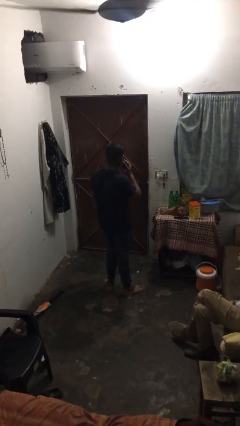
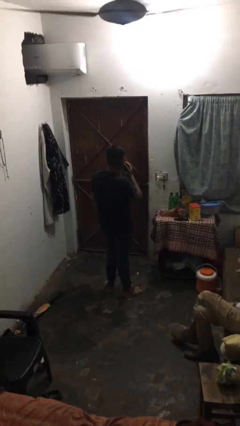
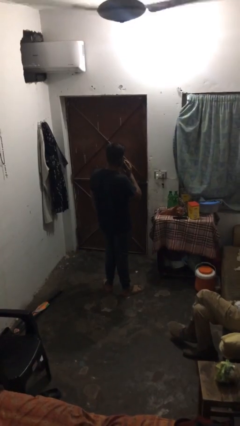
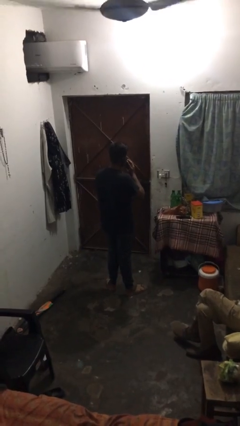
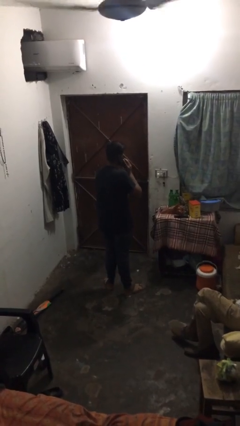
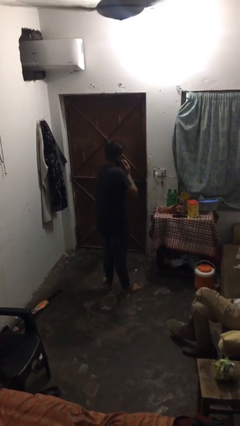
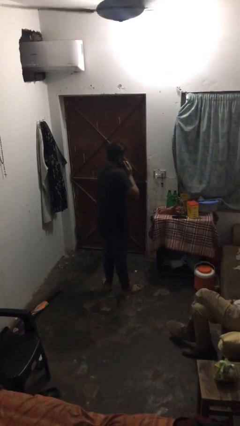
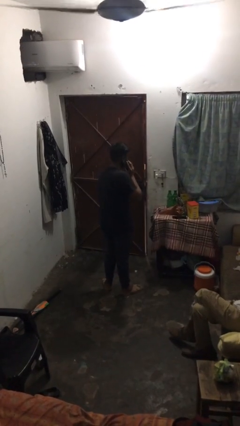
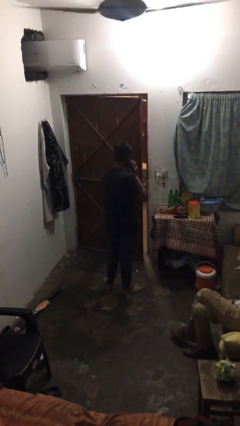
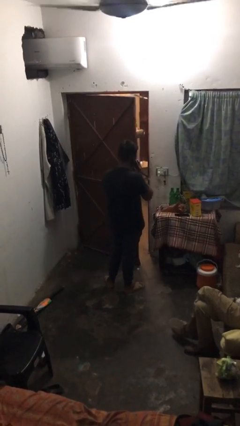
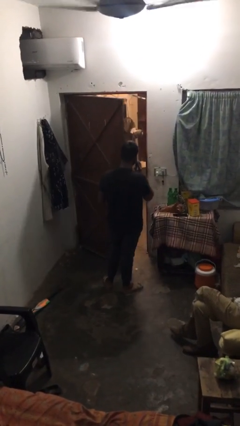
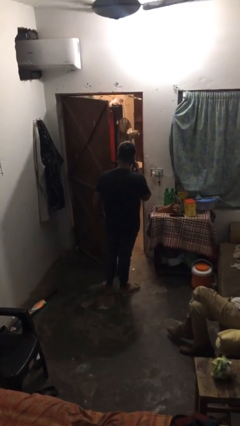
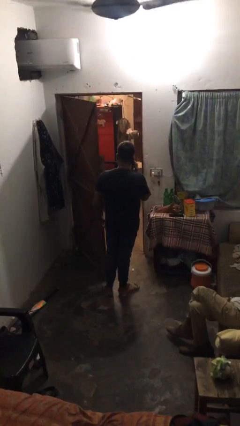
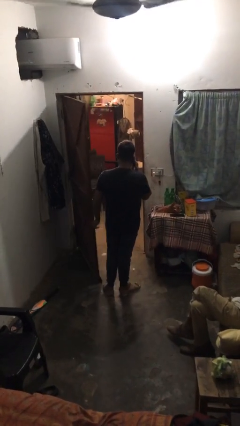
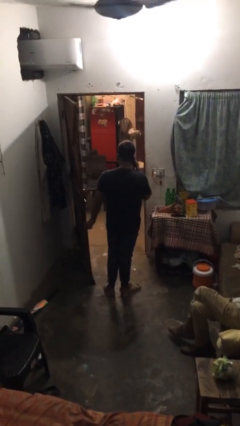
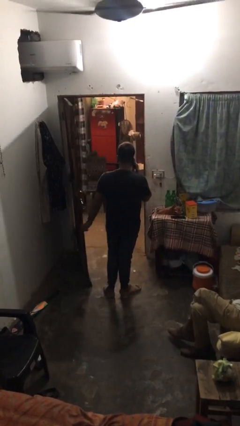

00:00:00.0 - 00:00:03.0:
person opens facility door

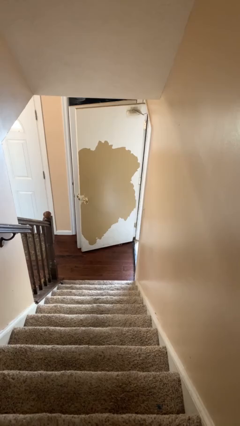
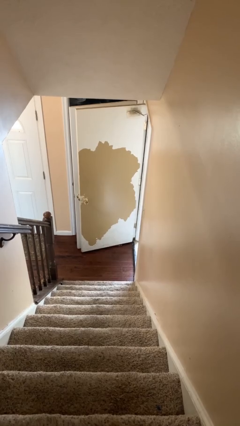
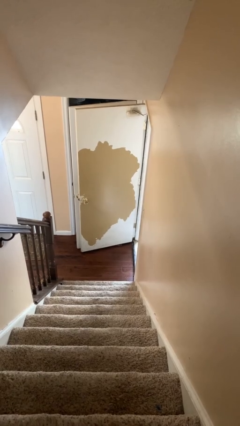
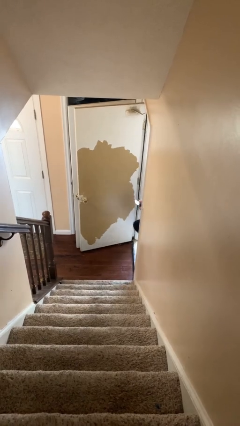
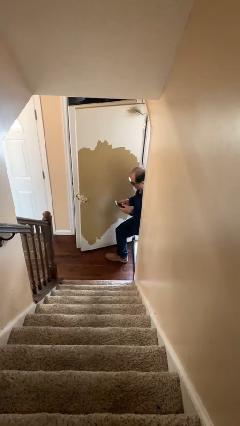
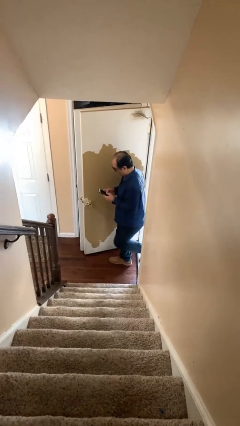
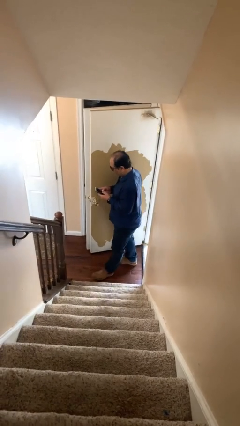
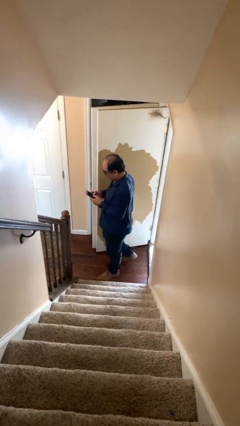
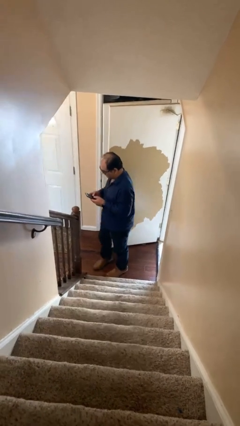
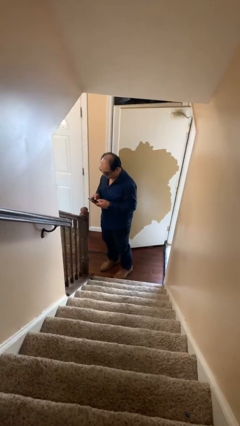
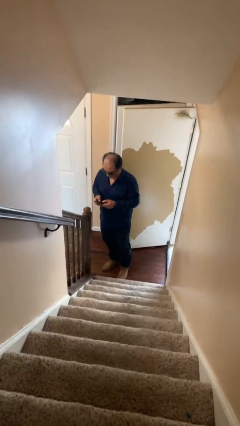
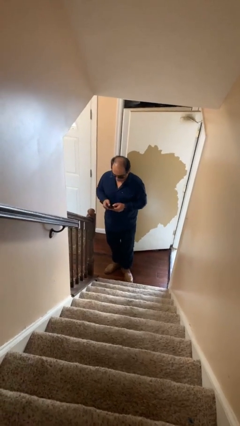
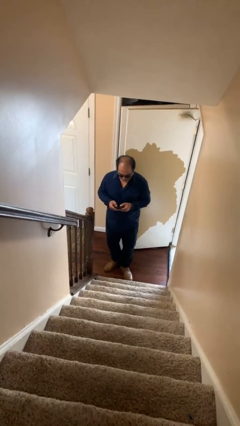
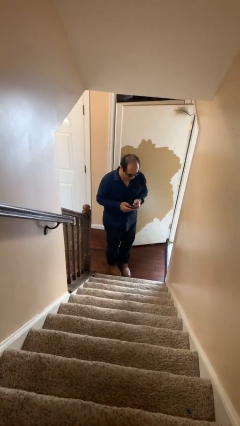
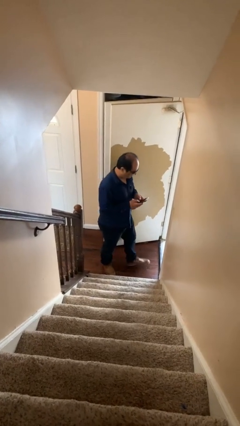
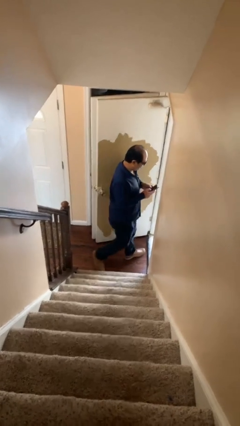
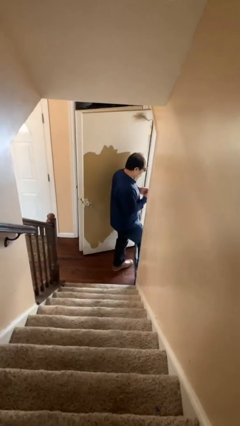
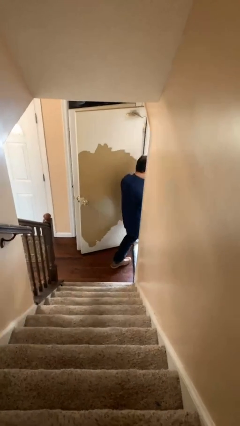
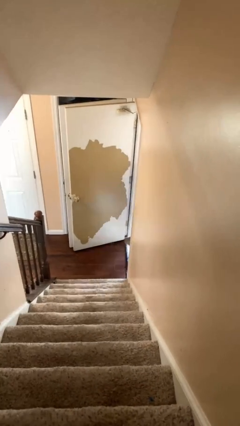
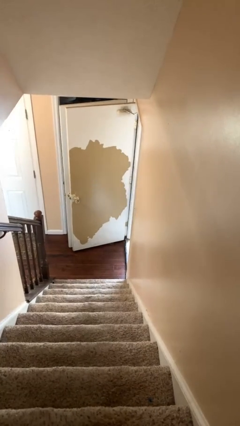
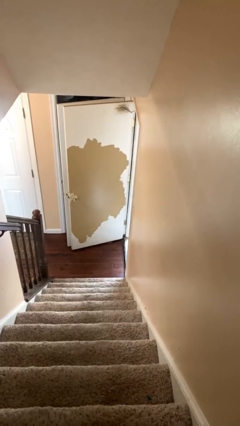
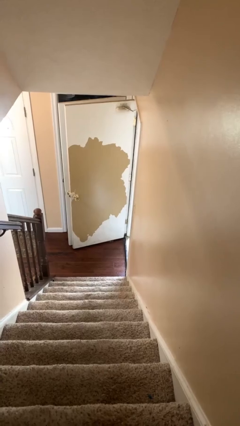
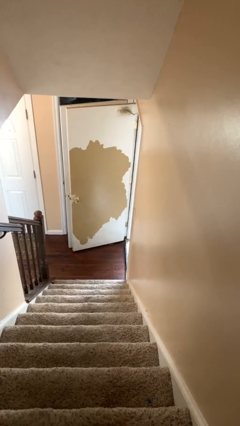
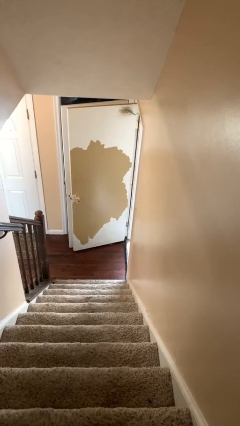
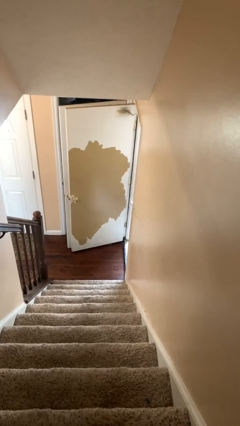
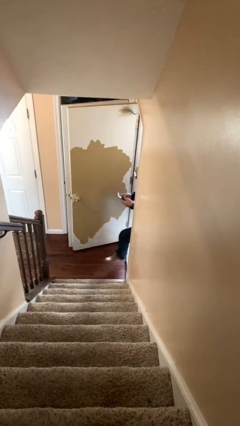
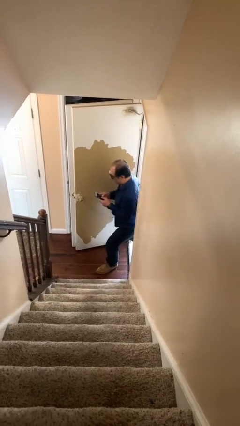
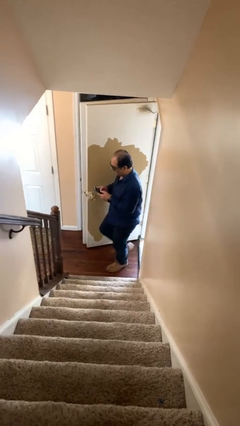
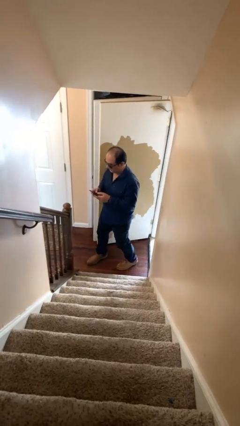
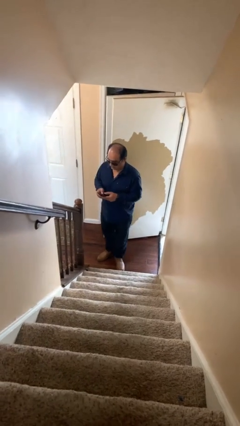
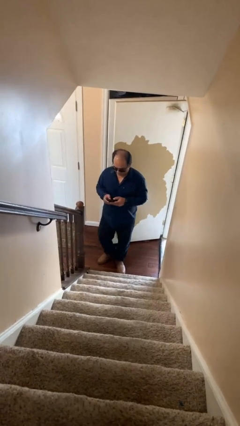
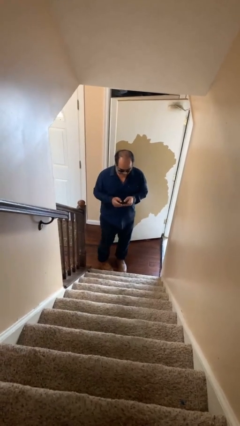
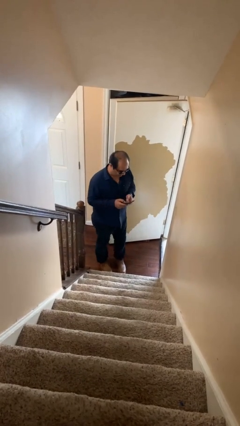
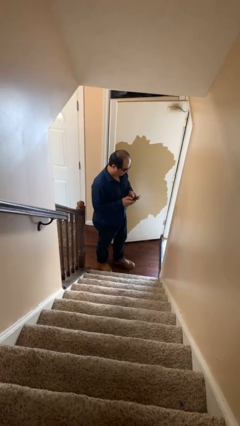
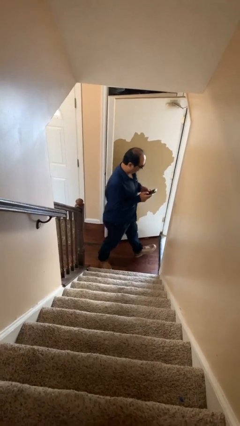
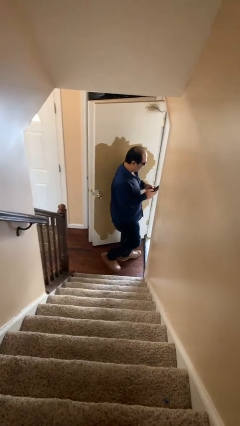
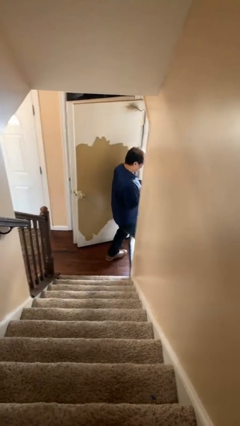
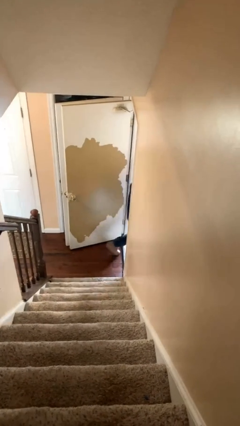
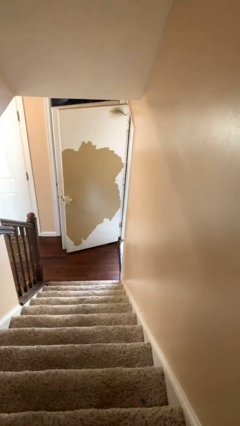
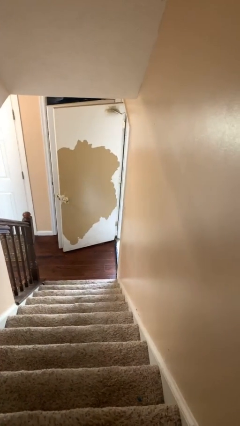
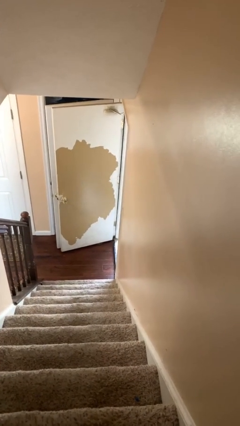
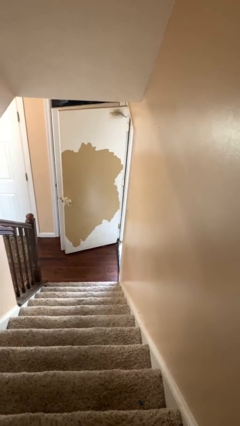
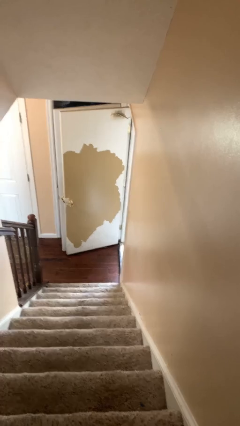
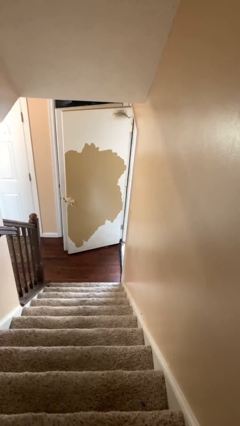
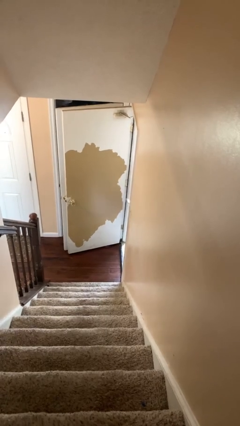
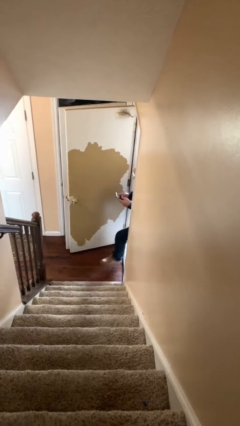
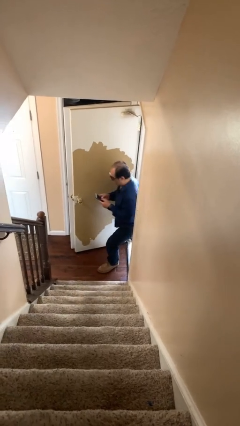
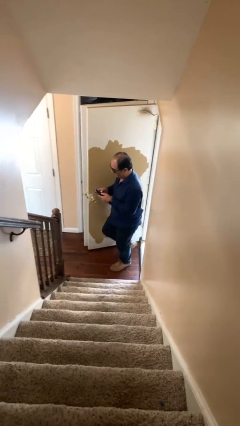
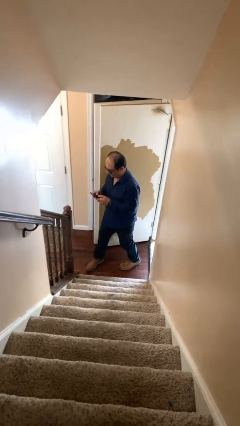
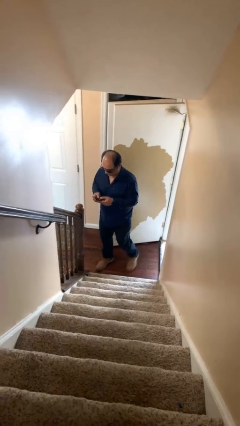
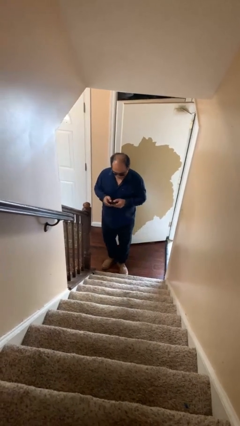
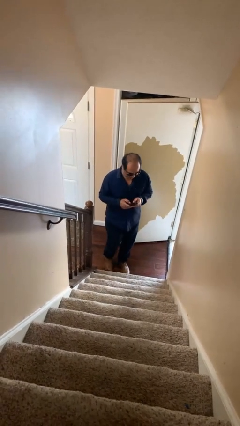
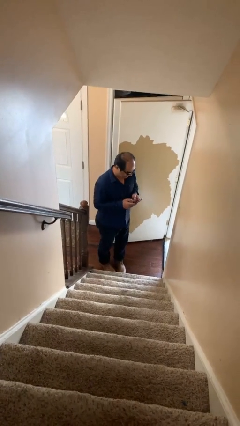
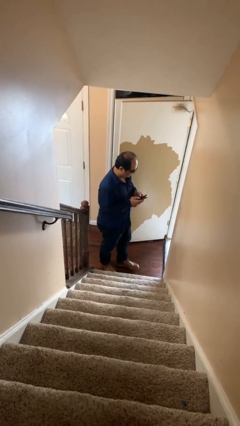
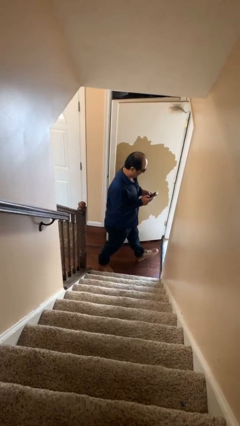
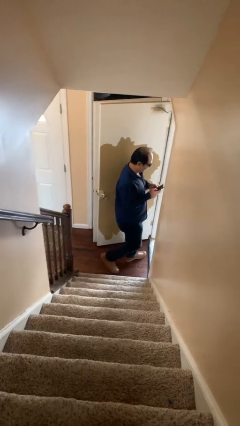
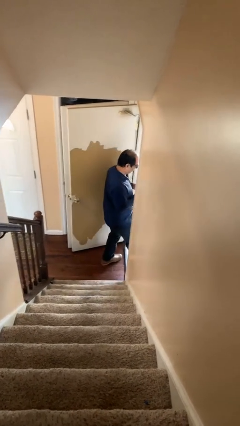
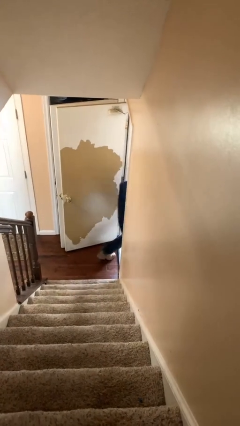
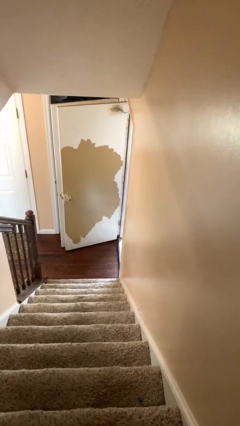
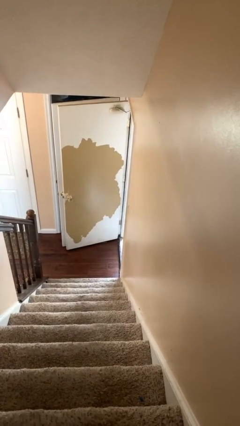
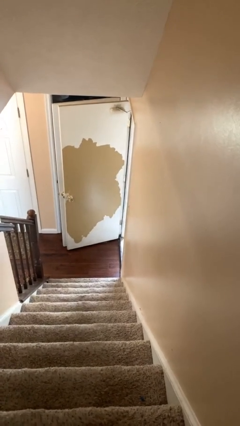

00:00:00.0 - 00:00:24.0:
person texts on phone

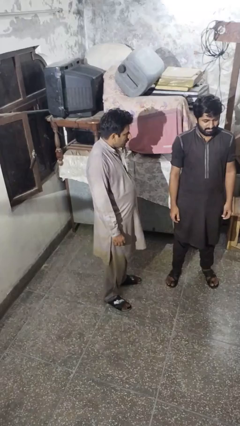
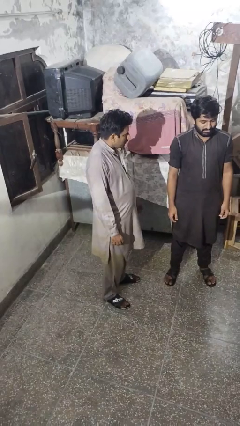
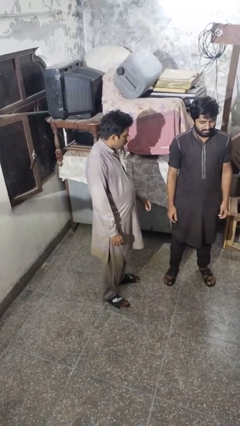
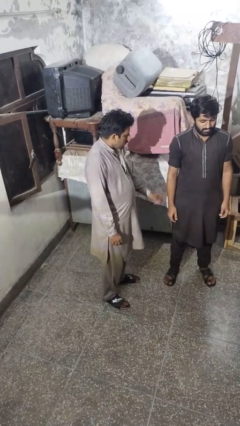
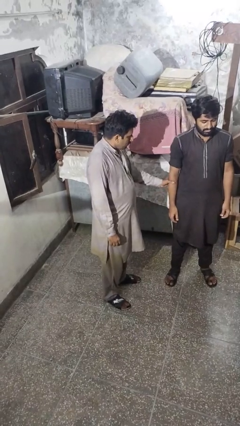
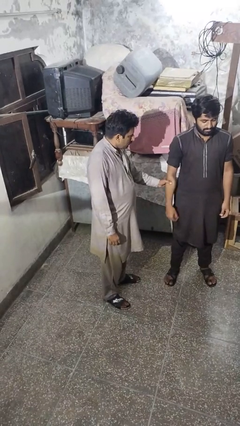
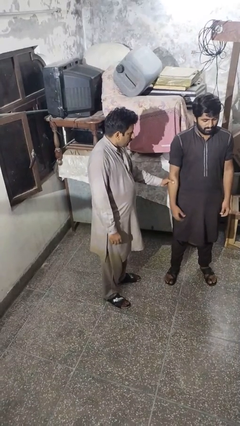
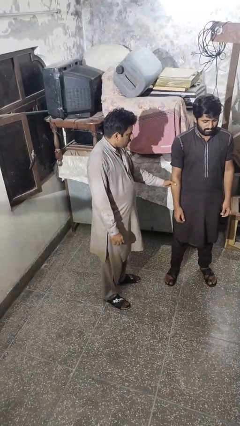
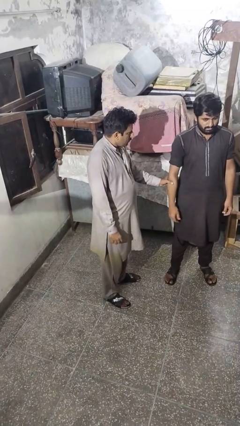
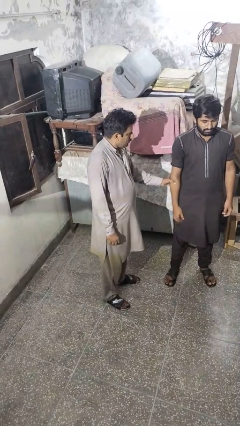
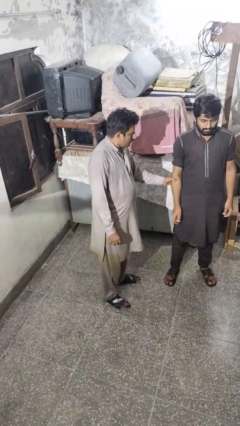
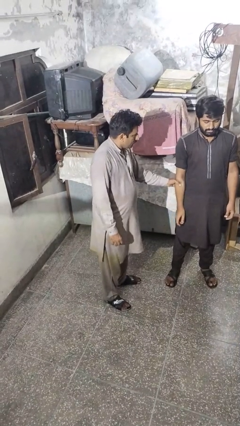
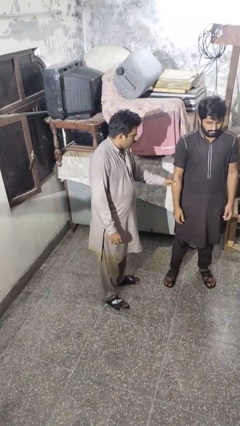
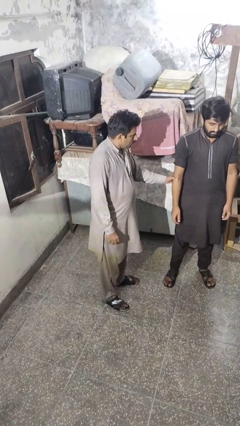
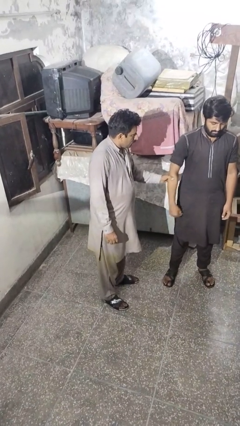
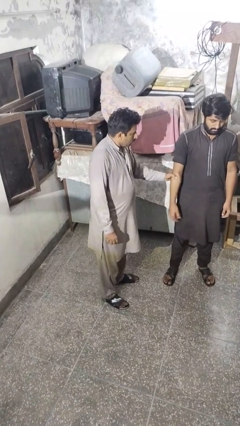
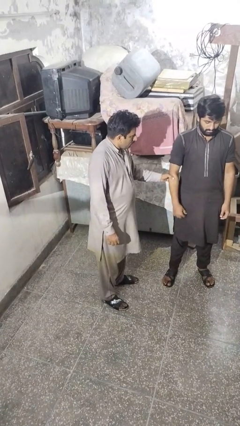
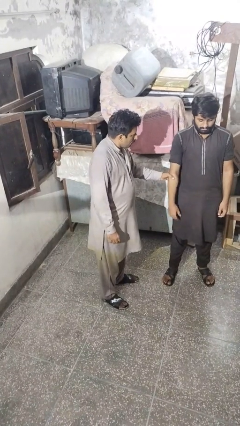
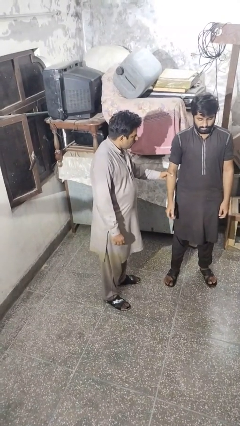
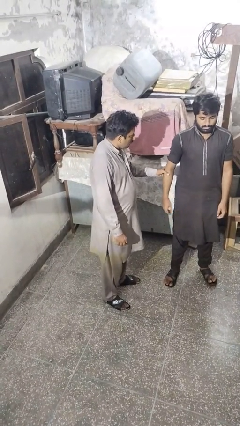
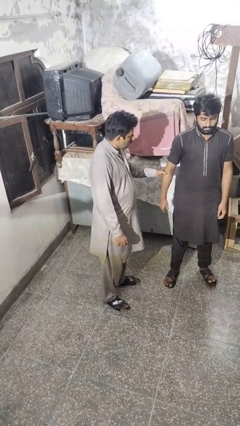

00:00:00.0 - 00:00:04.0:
person grabs person by forearm
